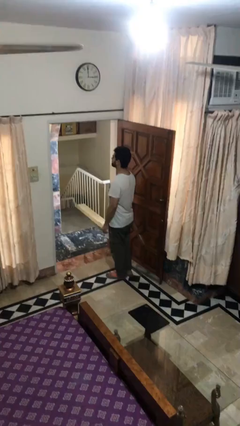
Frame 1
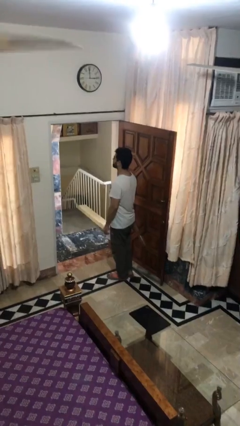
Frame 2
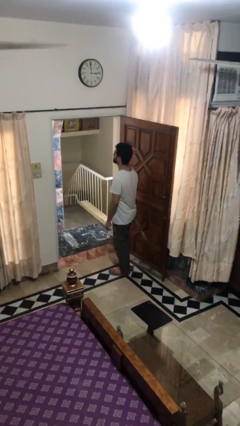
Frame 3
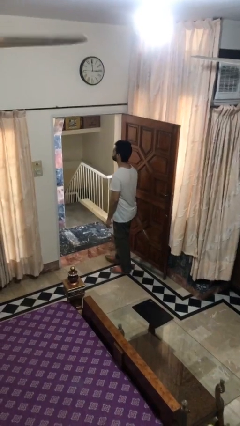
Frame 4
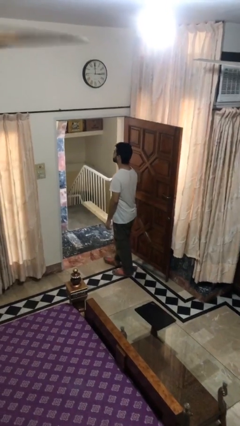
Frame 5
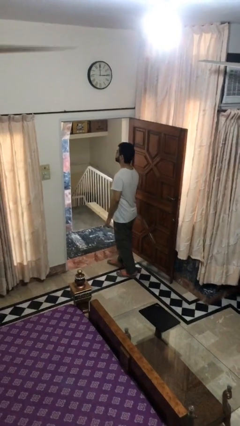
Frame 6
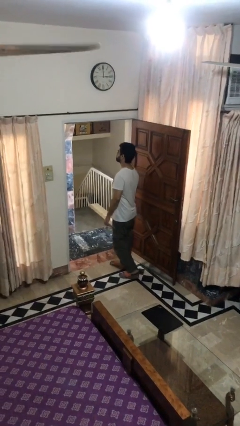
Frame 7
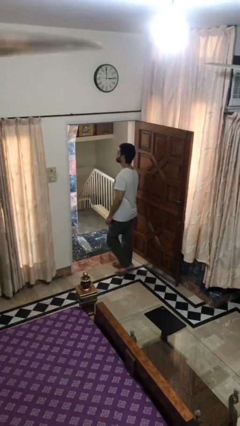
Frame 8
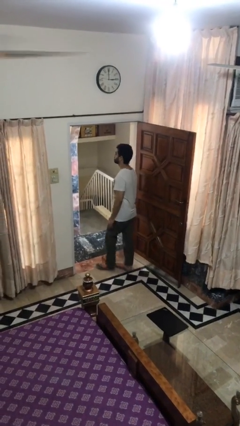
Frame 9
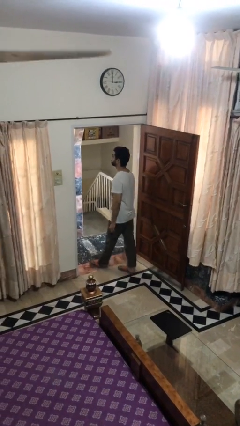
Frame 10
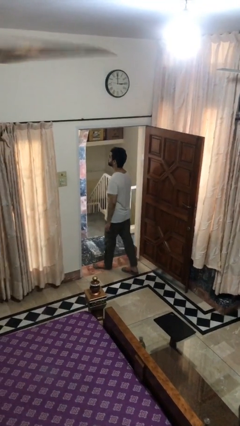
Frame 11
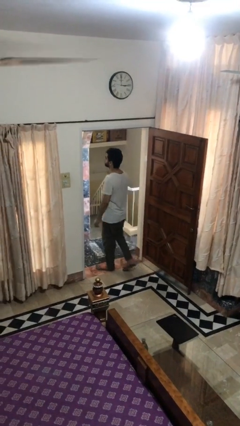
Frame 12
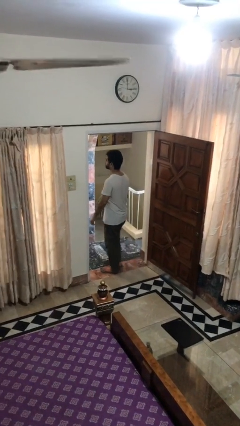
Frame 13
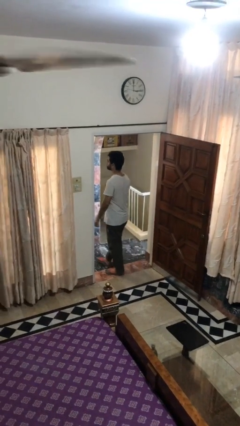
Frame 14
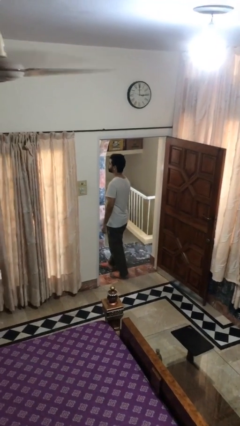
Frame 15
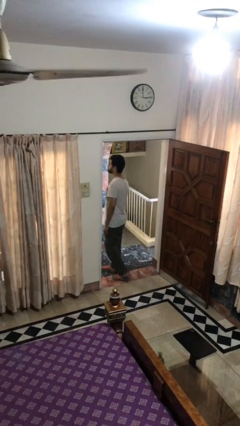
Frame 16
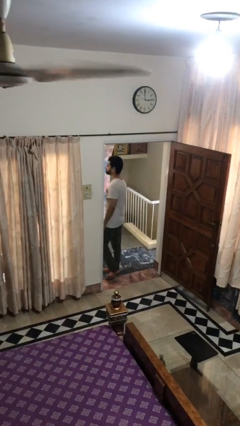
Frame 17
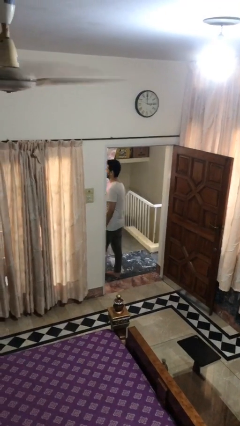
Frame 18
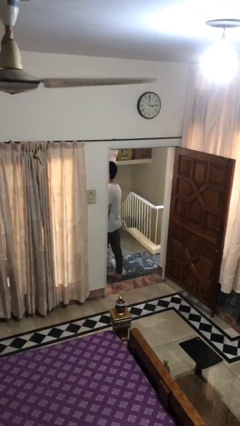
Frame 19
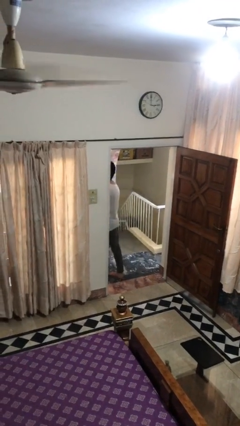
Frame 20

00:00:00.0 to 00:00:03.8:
person exits scene through structure

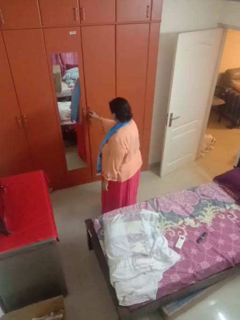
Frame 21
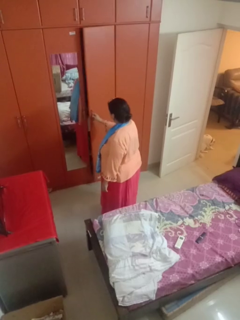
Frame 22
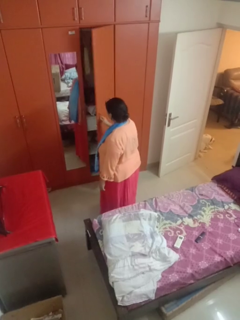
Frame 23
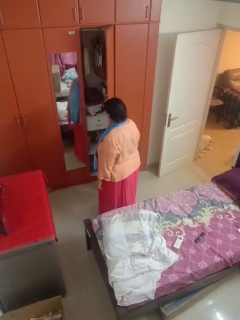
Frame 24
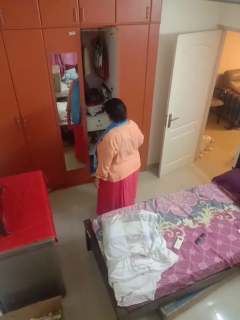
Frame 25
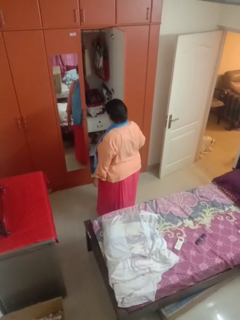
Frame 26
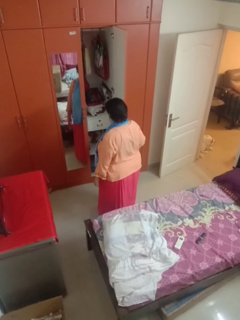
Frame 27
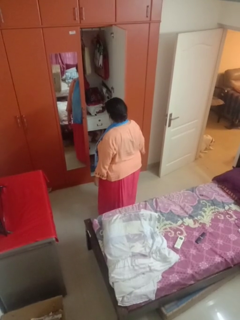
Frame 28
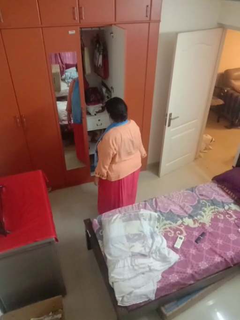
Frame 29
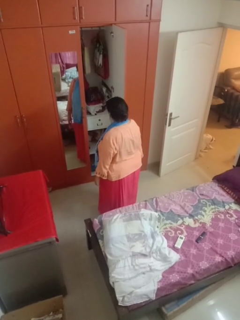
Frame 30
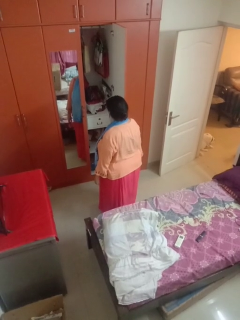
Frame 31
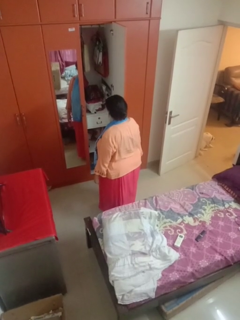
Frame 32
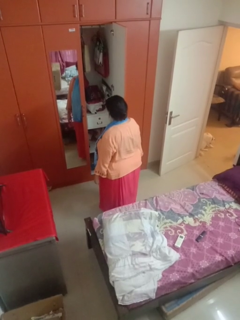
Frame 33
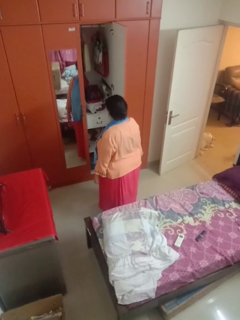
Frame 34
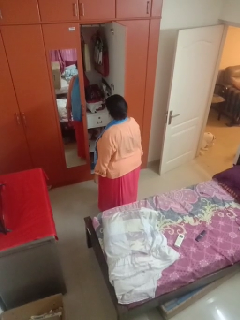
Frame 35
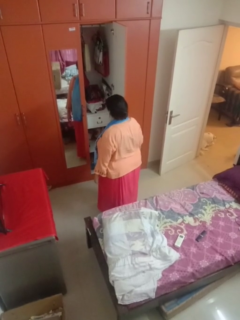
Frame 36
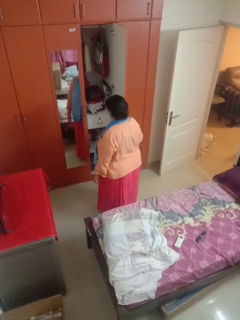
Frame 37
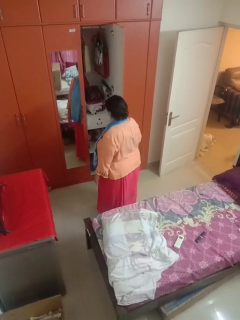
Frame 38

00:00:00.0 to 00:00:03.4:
person opens closet door

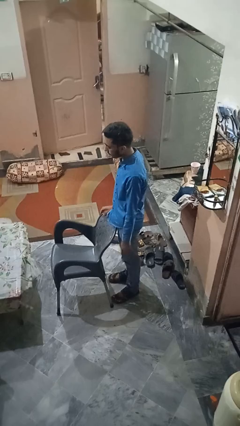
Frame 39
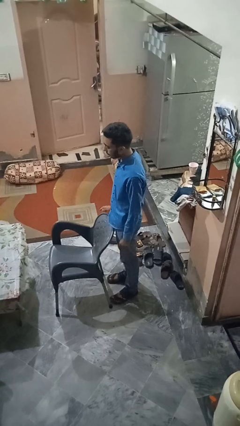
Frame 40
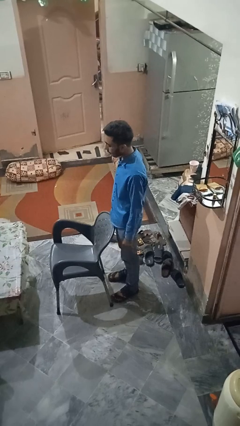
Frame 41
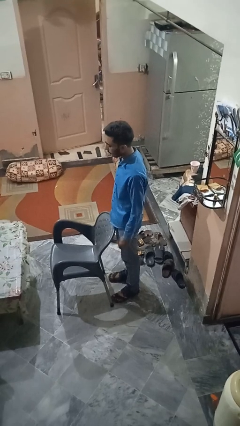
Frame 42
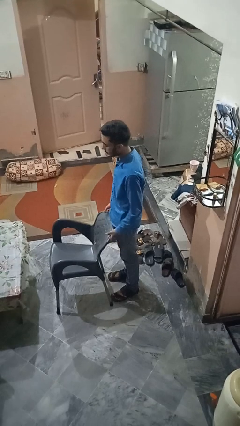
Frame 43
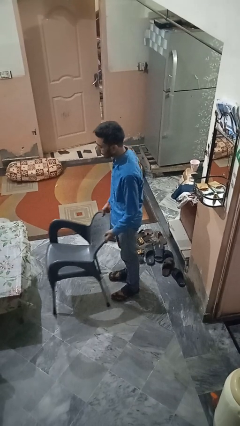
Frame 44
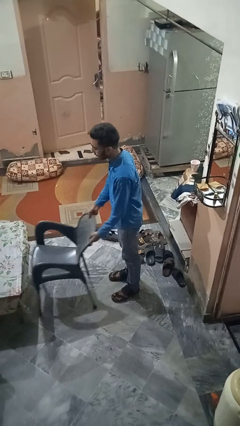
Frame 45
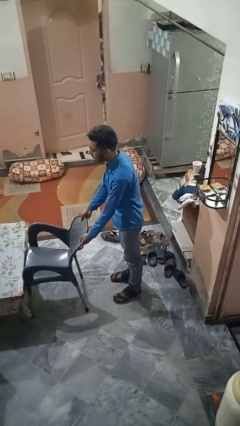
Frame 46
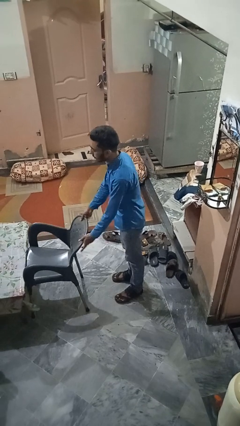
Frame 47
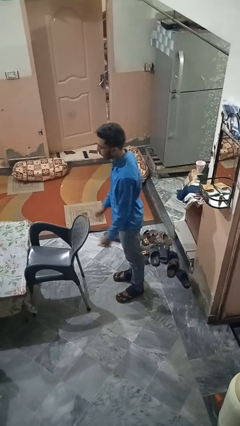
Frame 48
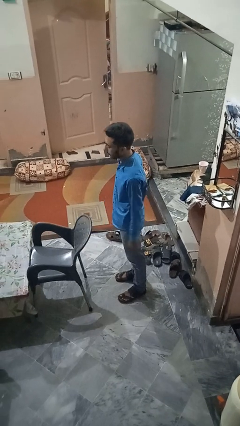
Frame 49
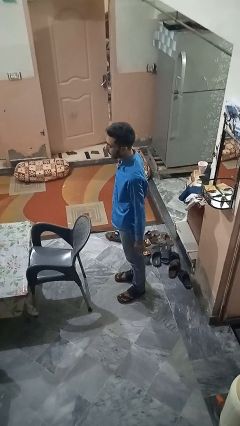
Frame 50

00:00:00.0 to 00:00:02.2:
person pushes in chair

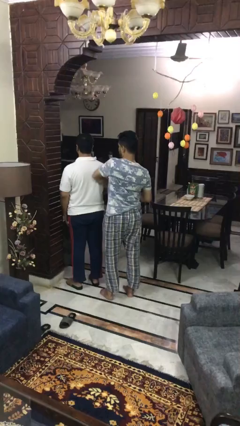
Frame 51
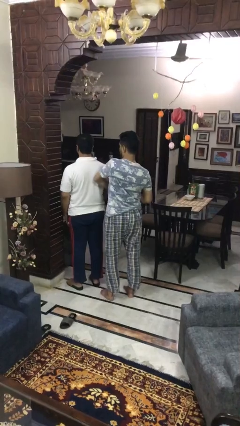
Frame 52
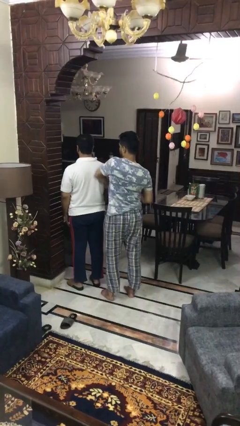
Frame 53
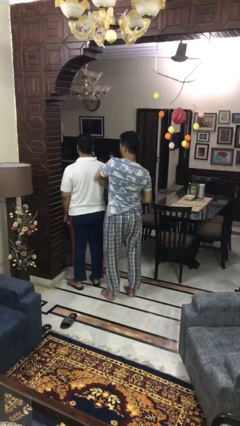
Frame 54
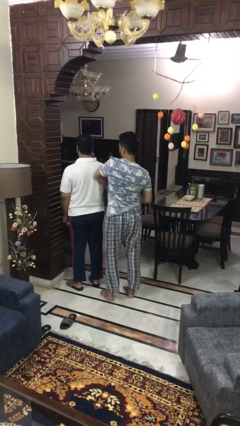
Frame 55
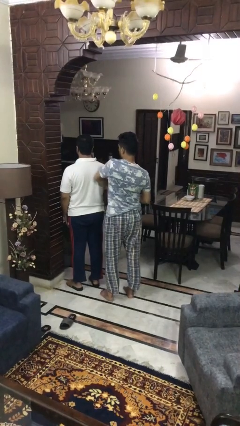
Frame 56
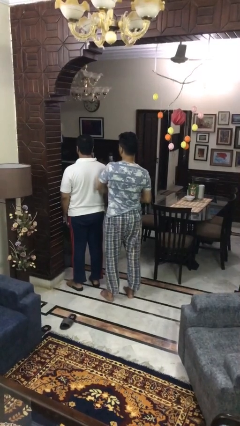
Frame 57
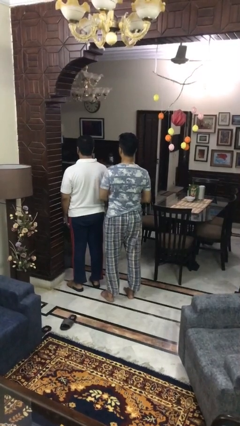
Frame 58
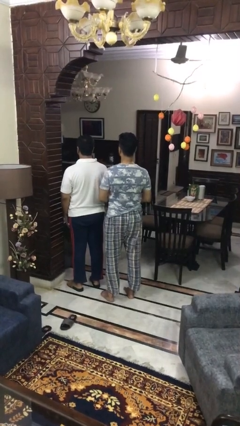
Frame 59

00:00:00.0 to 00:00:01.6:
person nudges person with elbow

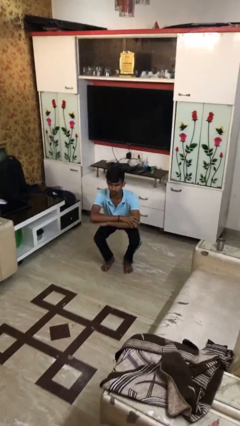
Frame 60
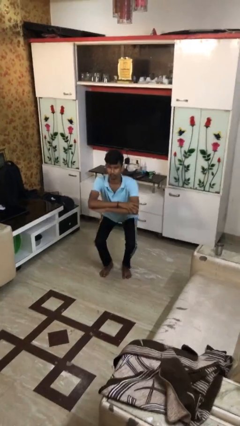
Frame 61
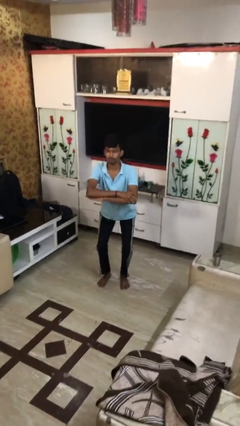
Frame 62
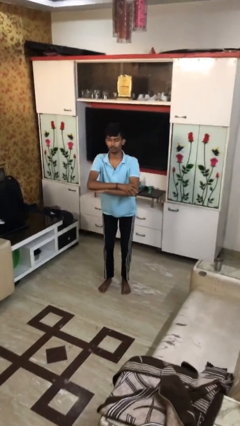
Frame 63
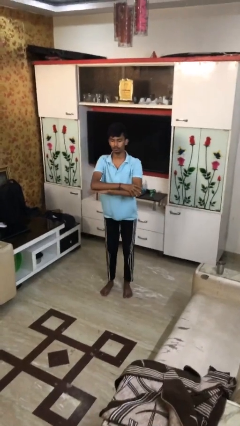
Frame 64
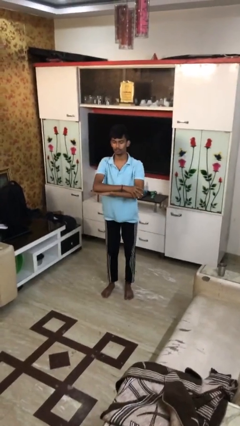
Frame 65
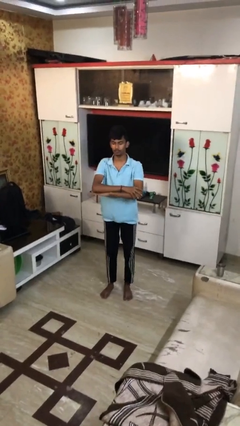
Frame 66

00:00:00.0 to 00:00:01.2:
person stands up

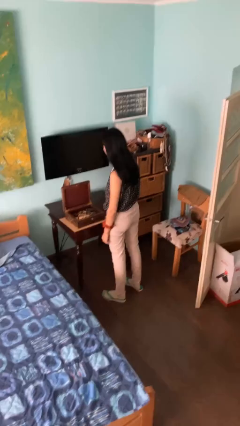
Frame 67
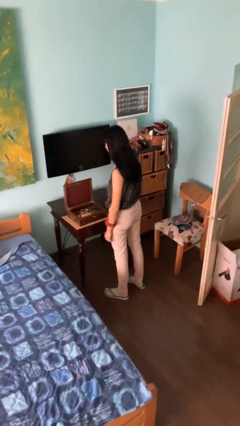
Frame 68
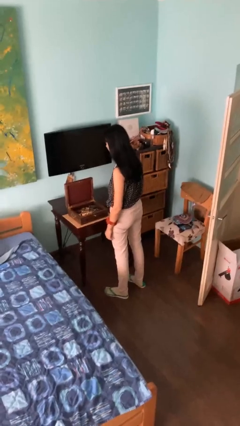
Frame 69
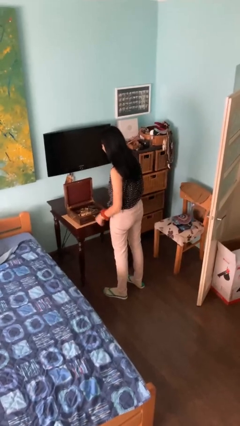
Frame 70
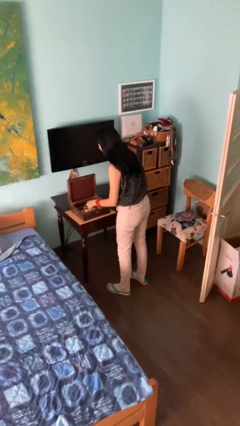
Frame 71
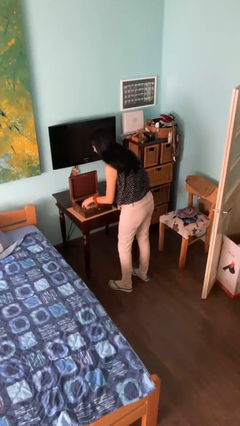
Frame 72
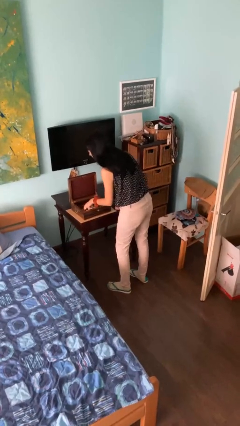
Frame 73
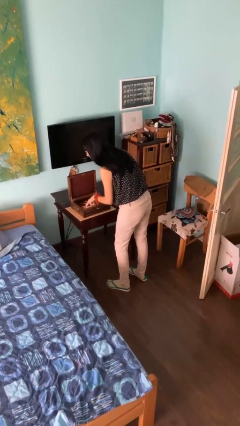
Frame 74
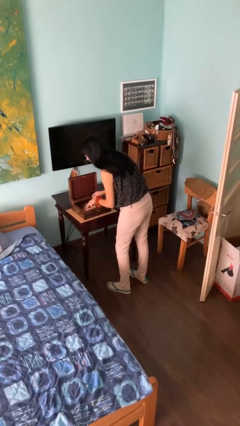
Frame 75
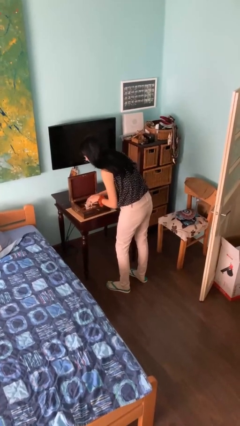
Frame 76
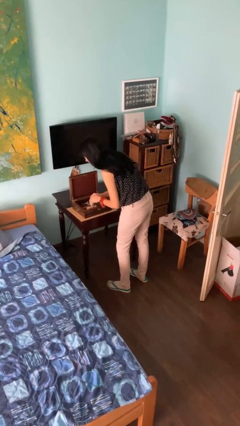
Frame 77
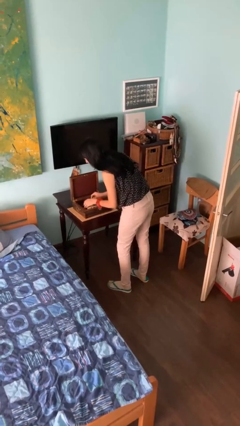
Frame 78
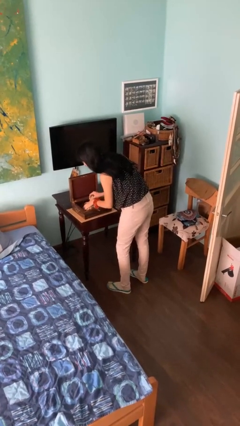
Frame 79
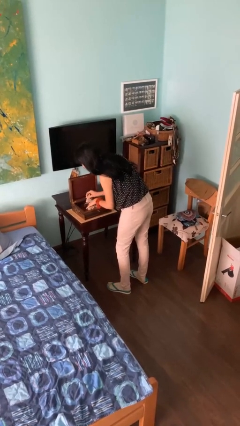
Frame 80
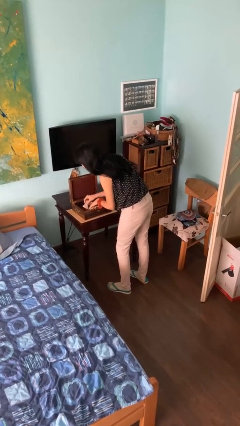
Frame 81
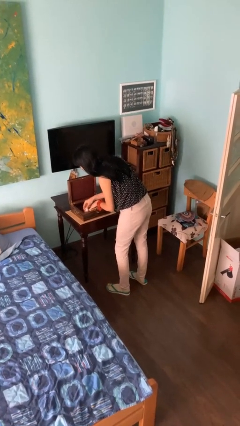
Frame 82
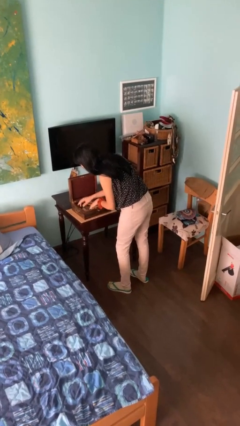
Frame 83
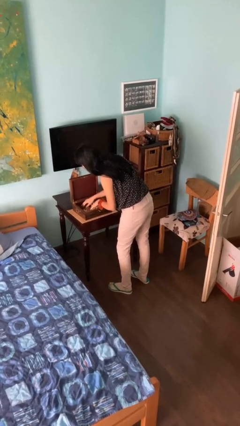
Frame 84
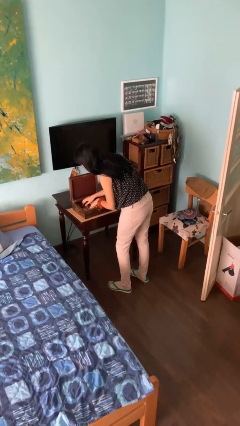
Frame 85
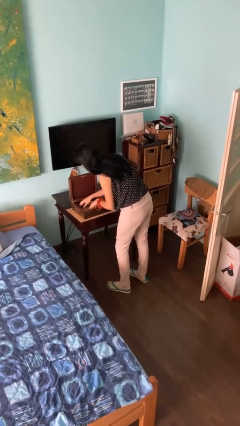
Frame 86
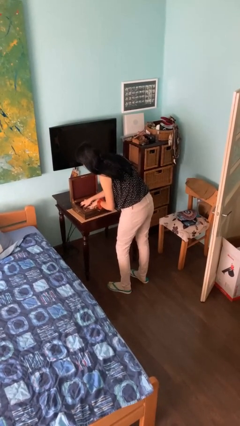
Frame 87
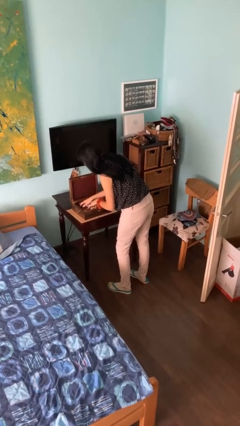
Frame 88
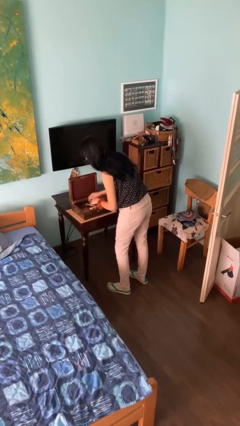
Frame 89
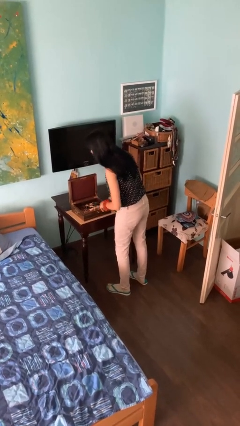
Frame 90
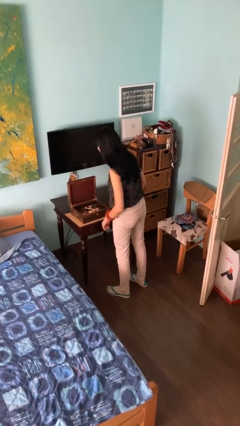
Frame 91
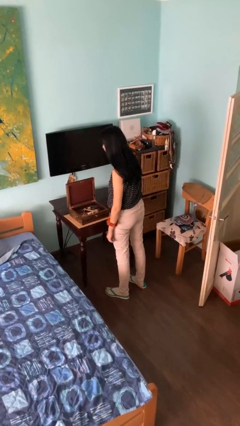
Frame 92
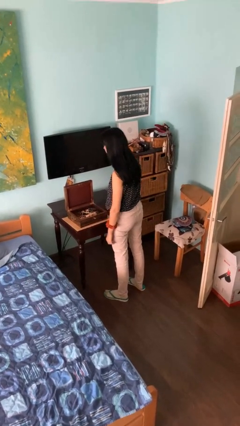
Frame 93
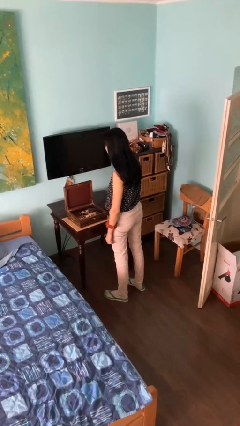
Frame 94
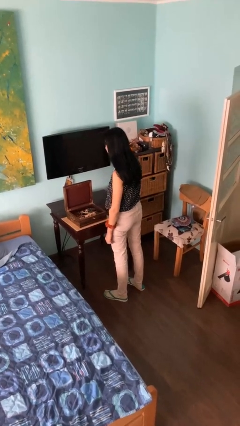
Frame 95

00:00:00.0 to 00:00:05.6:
person searches jewelry box

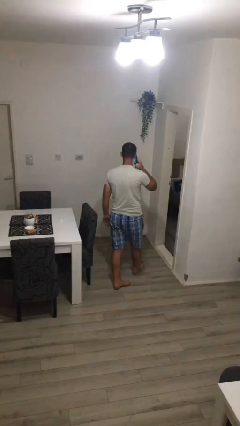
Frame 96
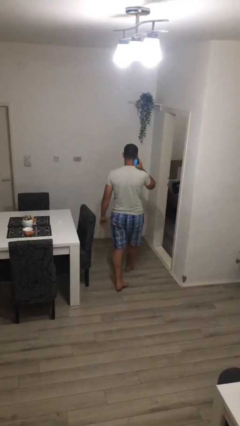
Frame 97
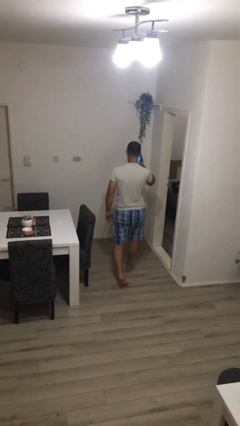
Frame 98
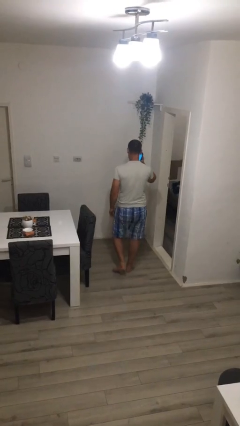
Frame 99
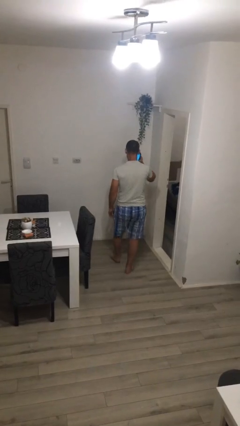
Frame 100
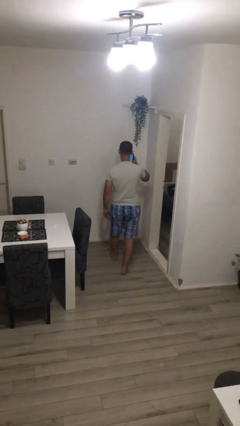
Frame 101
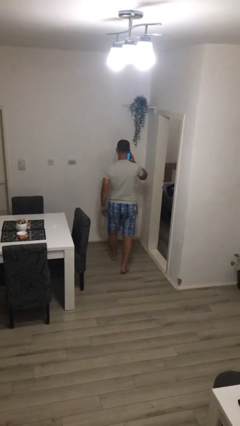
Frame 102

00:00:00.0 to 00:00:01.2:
person talks on phone
